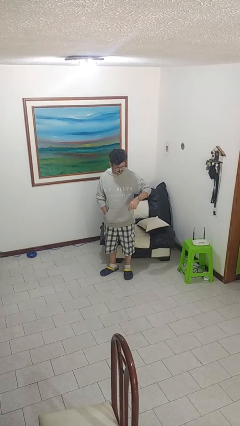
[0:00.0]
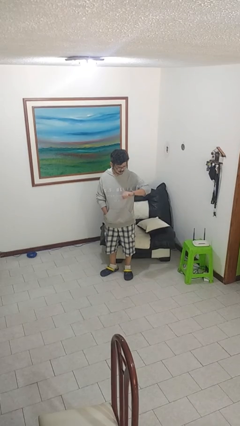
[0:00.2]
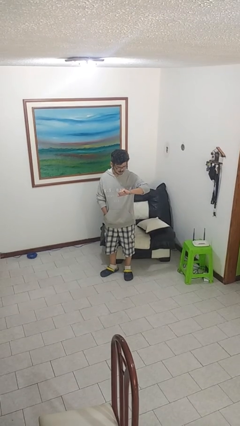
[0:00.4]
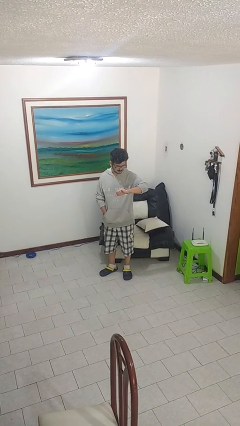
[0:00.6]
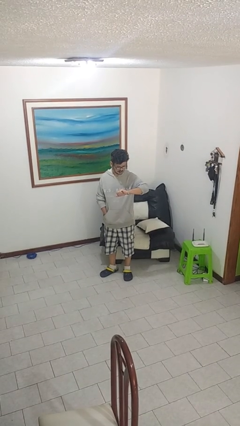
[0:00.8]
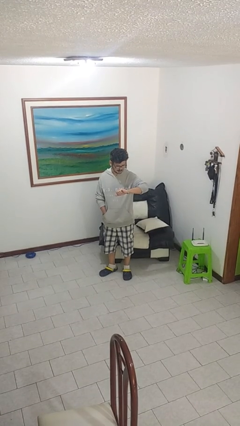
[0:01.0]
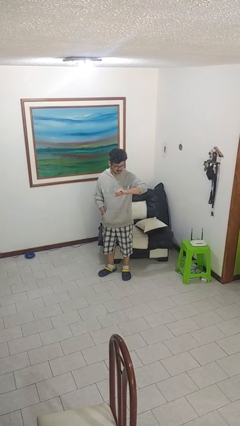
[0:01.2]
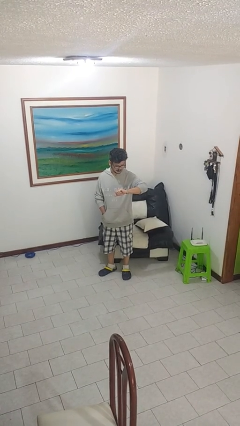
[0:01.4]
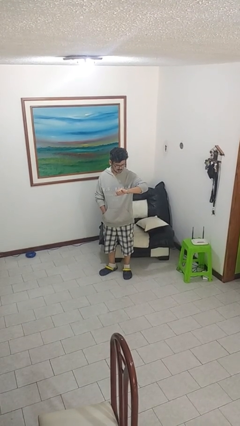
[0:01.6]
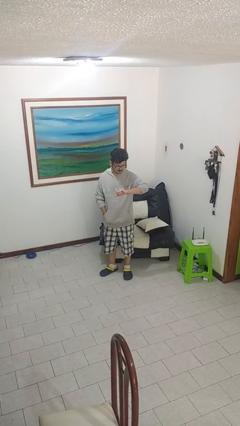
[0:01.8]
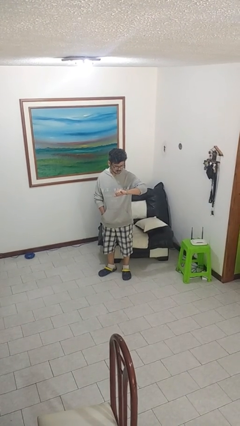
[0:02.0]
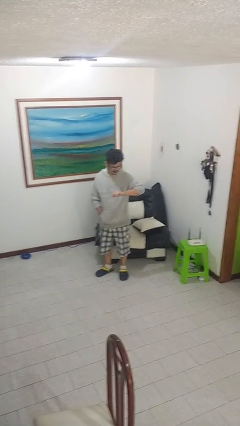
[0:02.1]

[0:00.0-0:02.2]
person looks at wristwatch

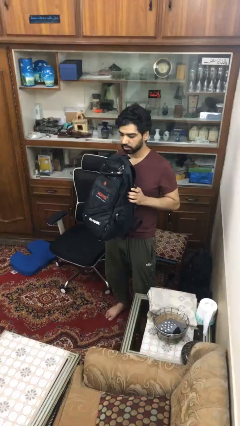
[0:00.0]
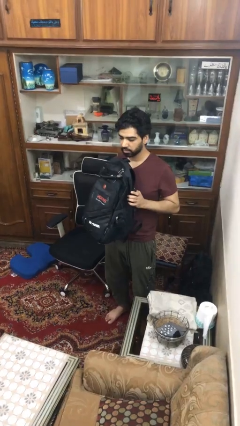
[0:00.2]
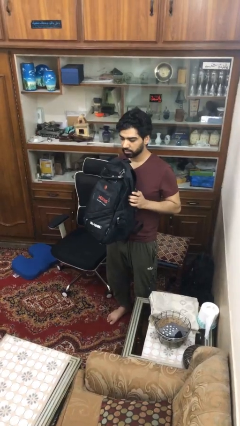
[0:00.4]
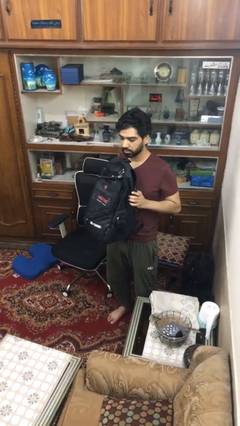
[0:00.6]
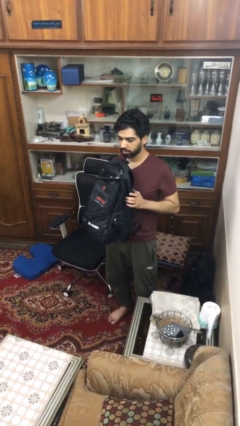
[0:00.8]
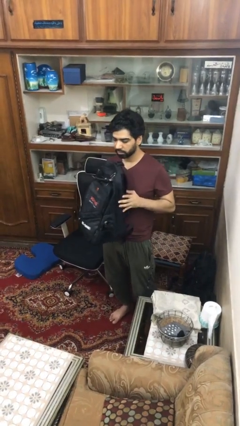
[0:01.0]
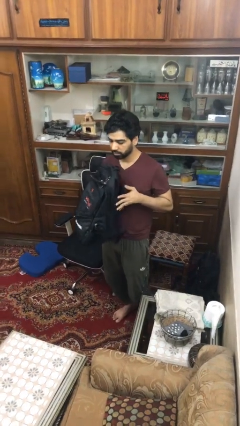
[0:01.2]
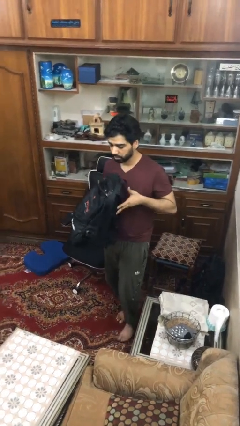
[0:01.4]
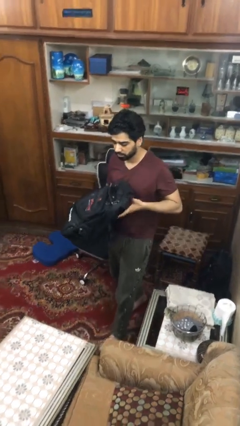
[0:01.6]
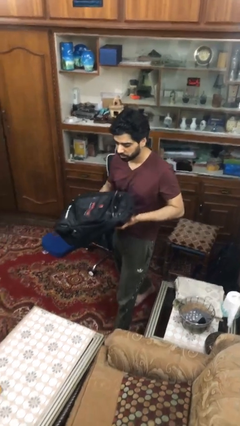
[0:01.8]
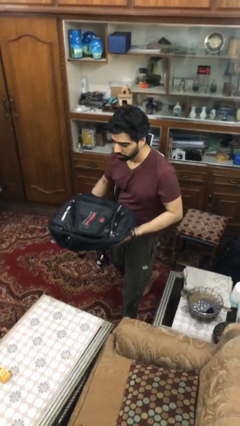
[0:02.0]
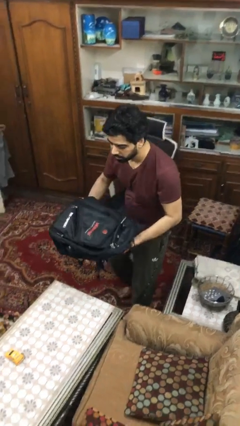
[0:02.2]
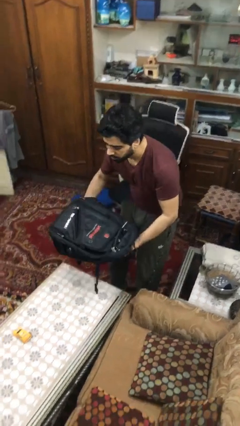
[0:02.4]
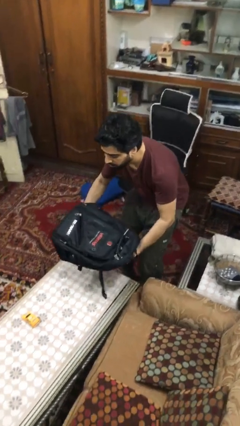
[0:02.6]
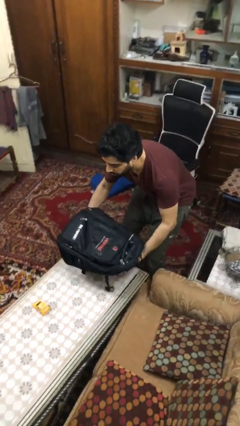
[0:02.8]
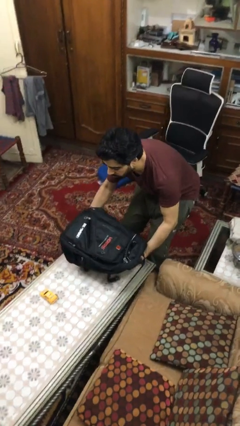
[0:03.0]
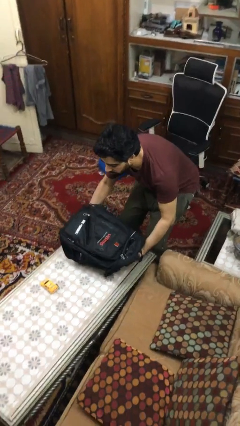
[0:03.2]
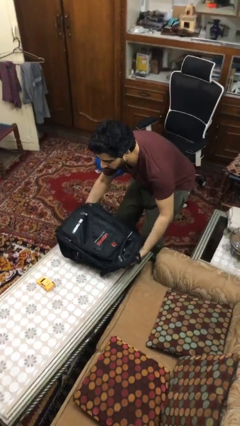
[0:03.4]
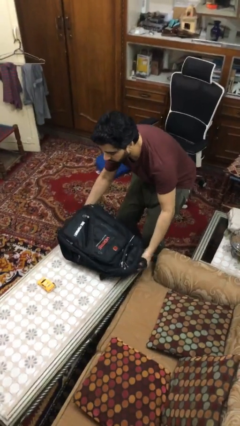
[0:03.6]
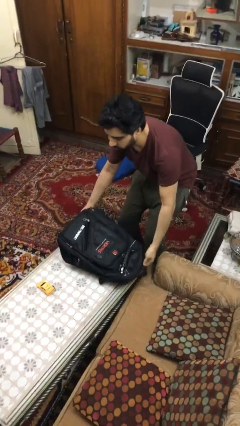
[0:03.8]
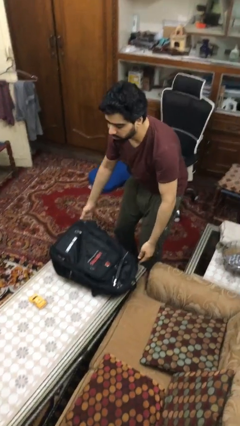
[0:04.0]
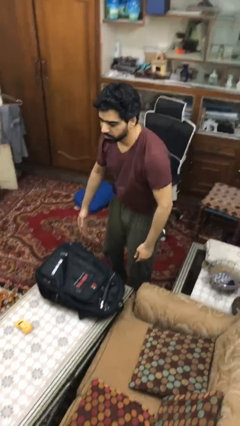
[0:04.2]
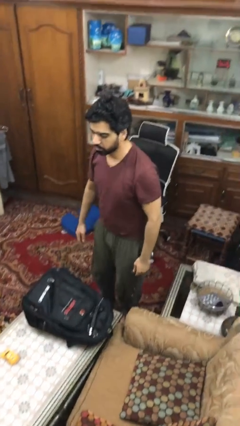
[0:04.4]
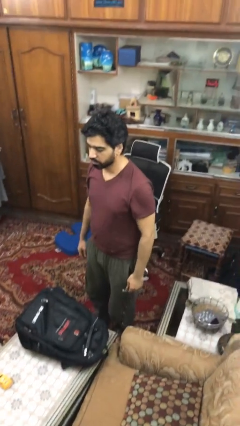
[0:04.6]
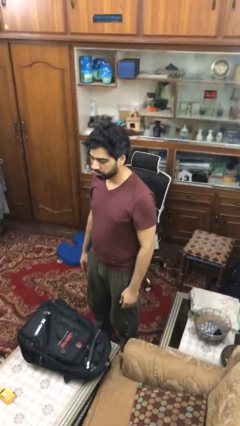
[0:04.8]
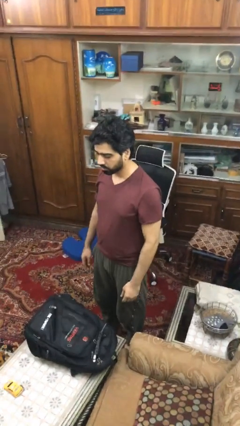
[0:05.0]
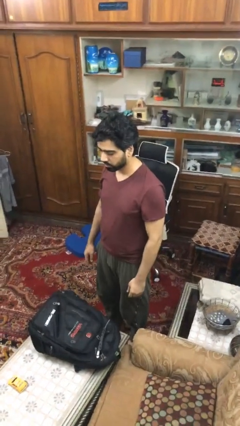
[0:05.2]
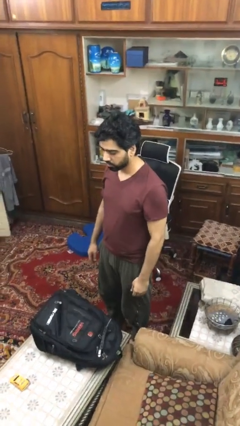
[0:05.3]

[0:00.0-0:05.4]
person puts down object on table

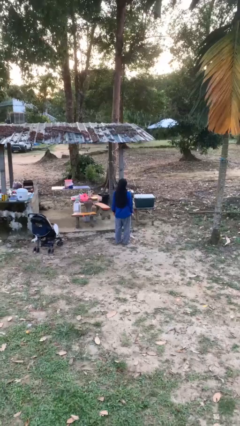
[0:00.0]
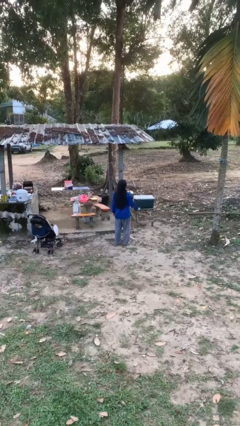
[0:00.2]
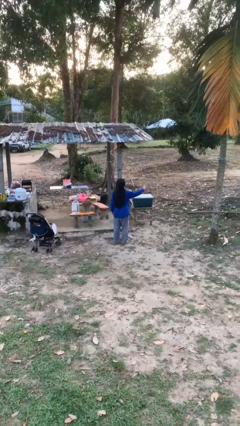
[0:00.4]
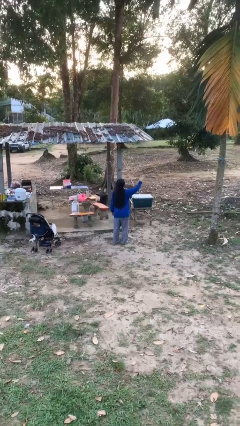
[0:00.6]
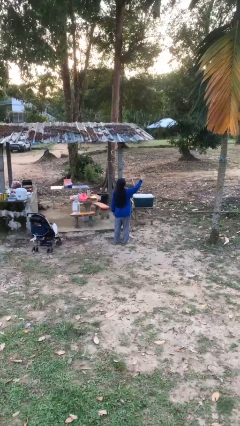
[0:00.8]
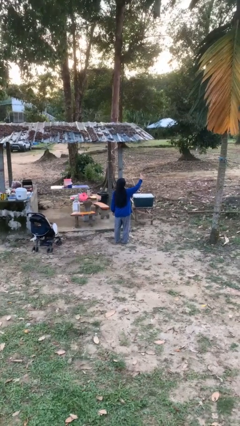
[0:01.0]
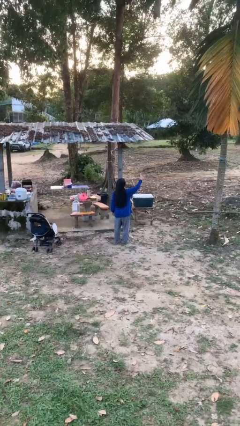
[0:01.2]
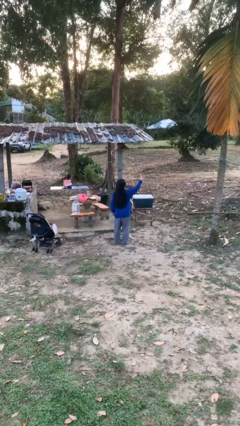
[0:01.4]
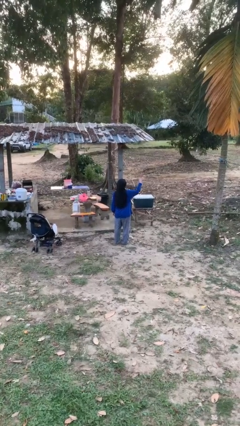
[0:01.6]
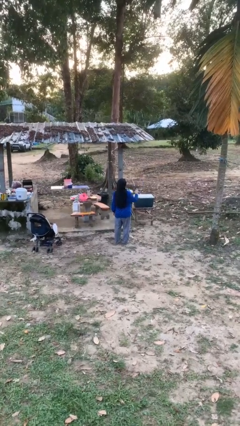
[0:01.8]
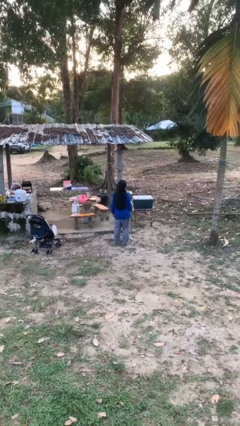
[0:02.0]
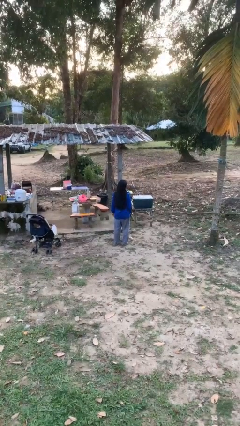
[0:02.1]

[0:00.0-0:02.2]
person gestures number three

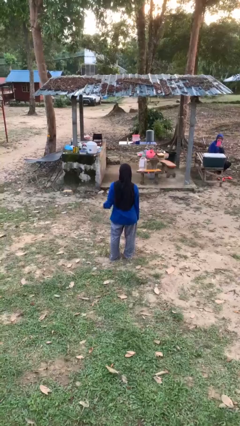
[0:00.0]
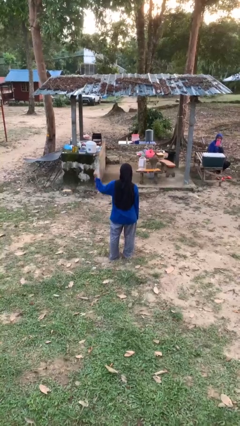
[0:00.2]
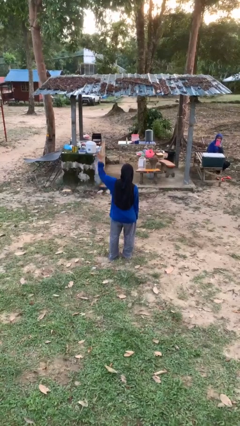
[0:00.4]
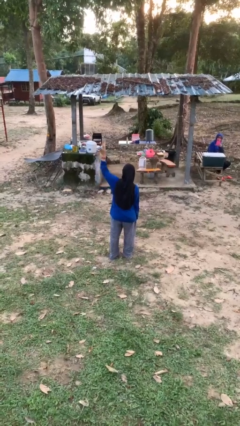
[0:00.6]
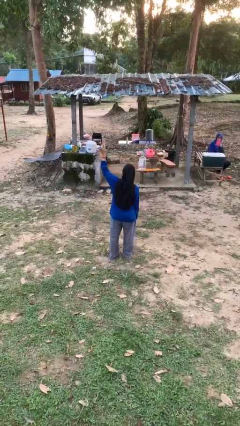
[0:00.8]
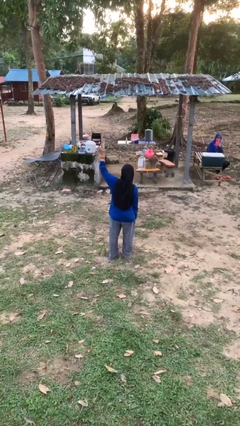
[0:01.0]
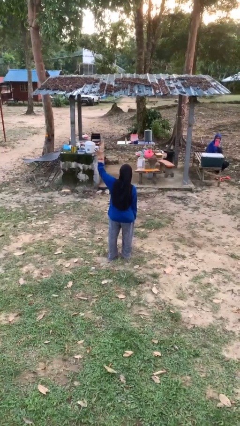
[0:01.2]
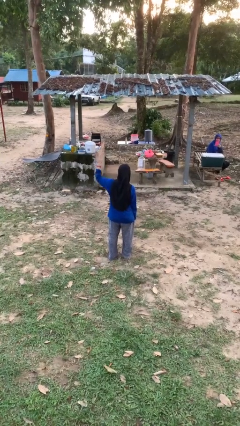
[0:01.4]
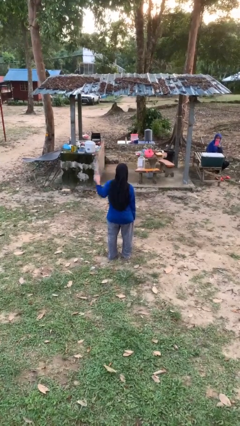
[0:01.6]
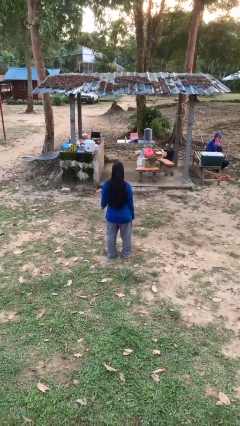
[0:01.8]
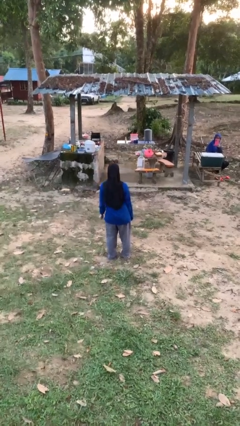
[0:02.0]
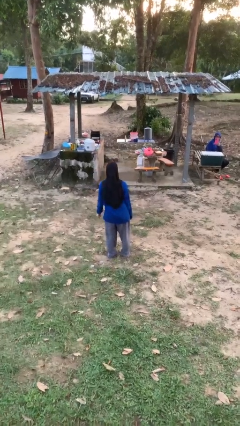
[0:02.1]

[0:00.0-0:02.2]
person gestures number five

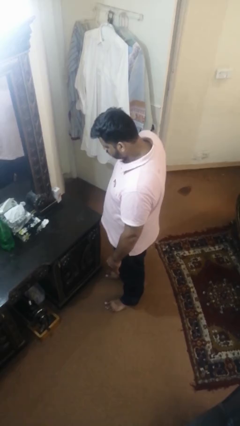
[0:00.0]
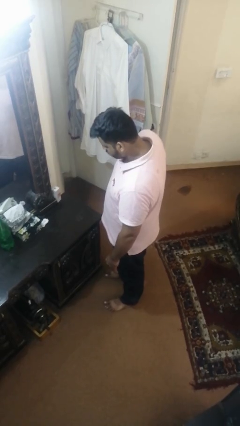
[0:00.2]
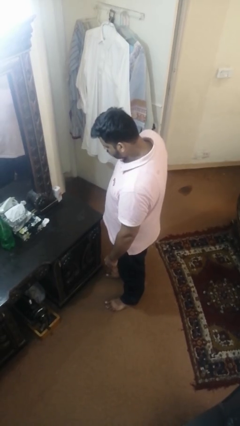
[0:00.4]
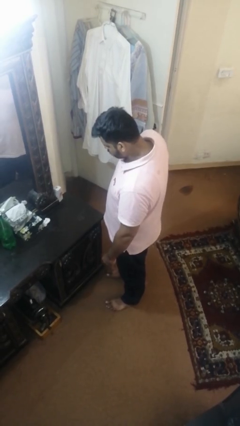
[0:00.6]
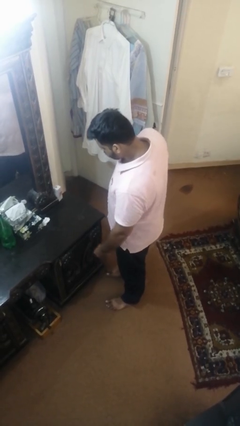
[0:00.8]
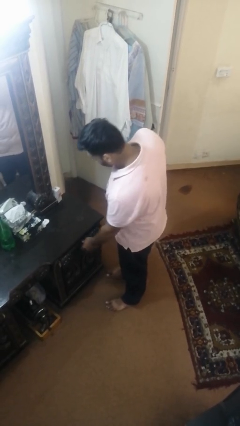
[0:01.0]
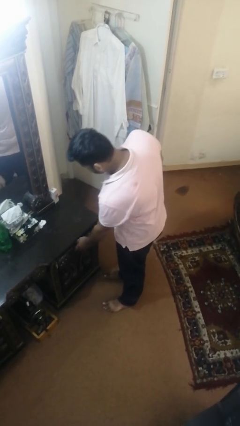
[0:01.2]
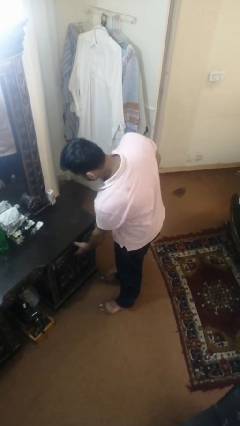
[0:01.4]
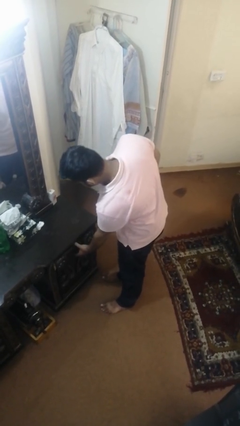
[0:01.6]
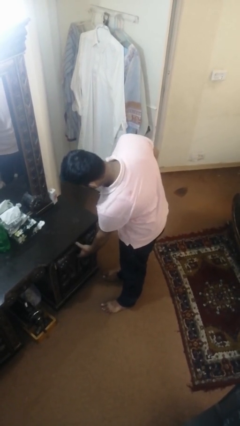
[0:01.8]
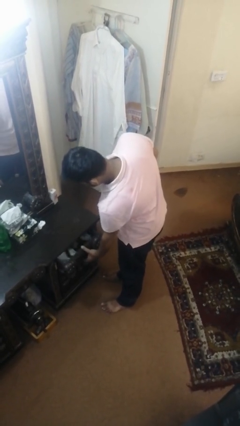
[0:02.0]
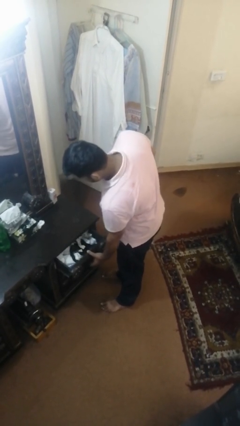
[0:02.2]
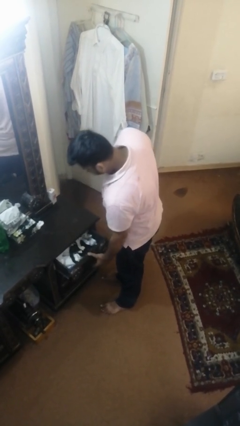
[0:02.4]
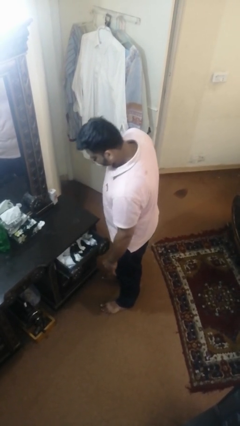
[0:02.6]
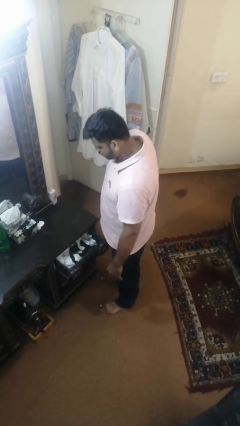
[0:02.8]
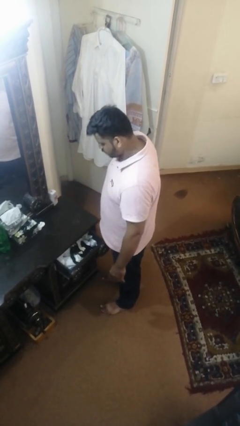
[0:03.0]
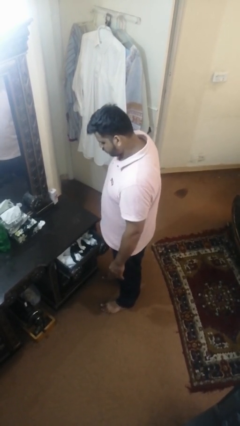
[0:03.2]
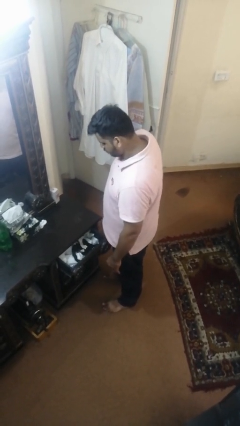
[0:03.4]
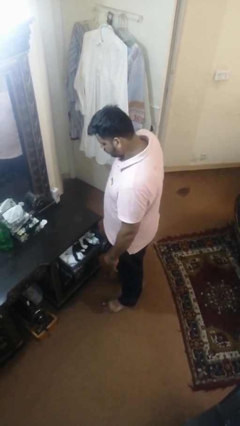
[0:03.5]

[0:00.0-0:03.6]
person opens dresser drawer

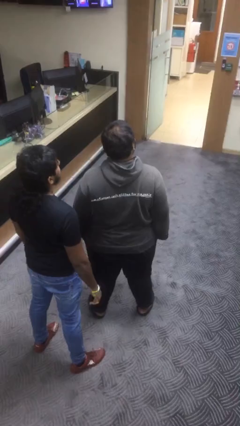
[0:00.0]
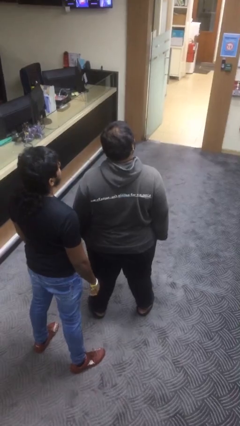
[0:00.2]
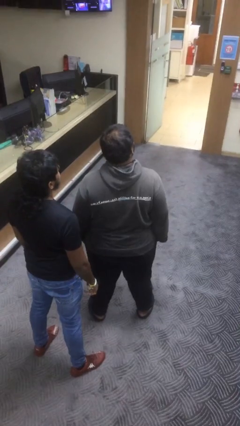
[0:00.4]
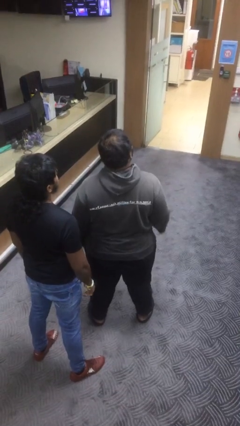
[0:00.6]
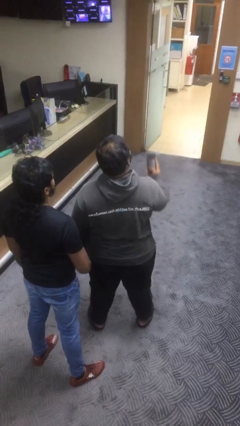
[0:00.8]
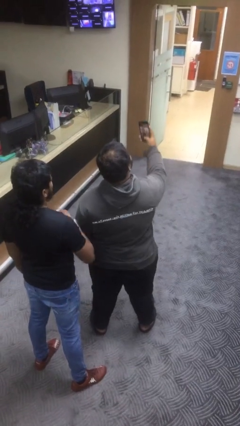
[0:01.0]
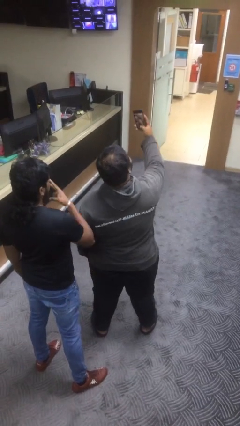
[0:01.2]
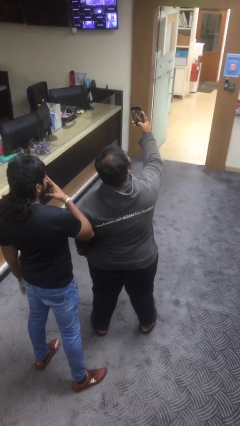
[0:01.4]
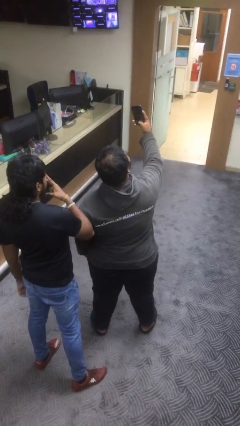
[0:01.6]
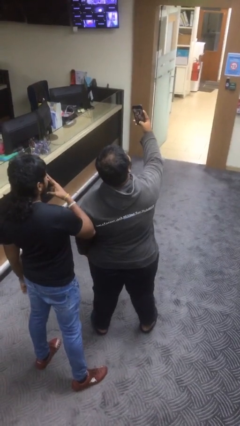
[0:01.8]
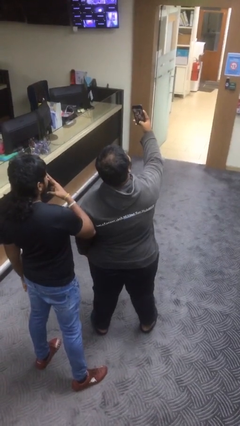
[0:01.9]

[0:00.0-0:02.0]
person takes selfie with person

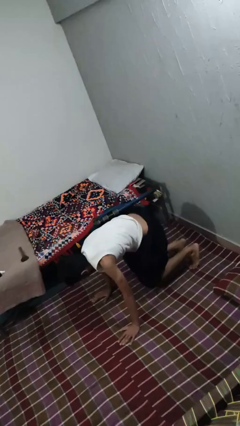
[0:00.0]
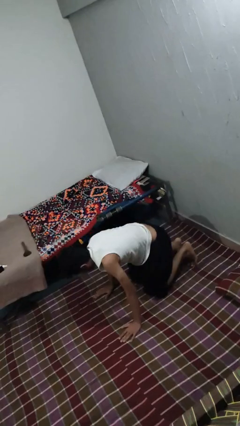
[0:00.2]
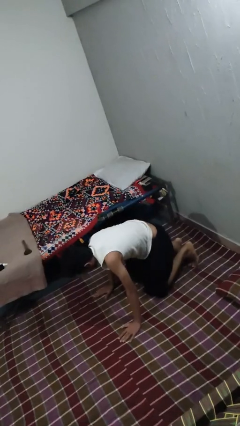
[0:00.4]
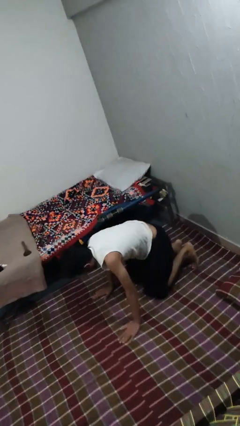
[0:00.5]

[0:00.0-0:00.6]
person handstand
